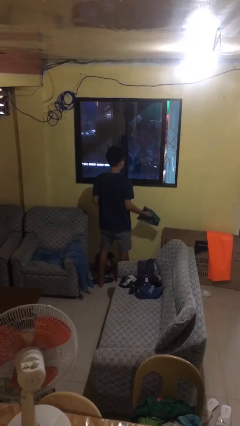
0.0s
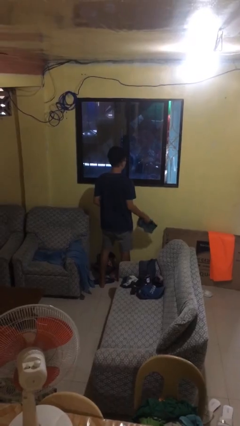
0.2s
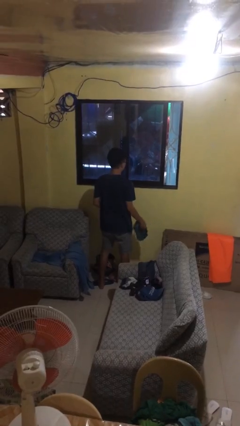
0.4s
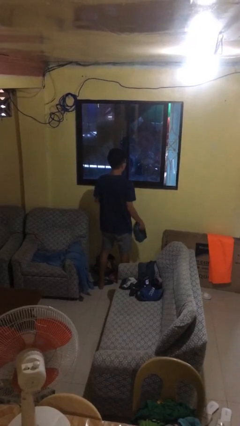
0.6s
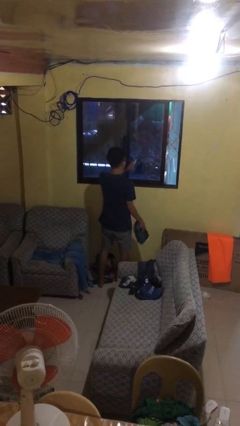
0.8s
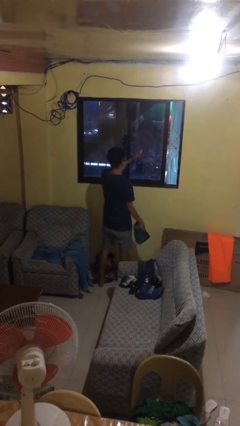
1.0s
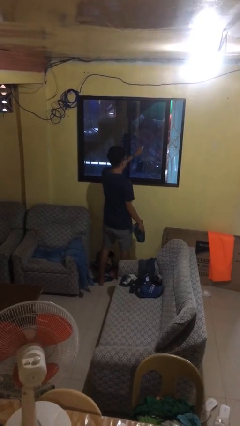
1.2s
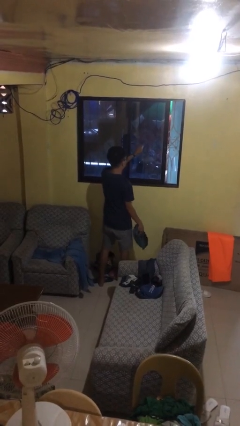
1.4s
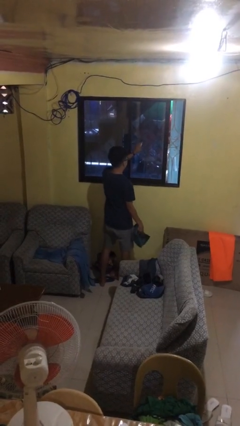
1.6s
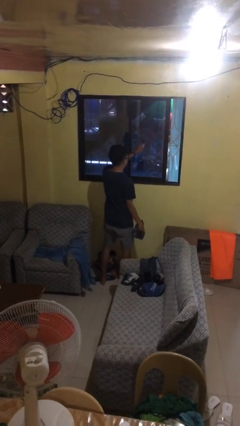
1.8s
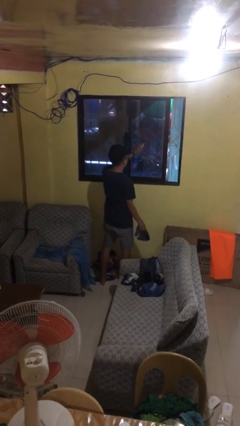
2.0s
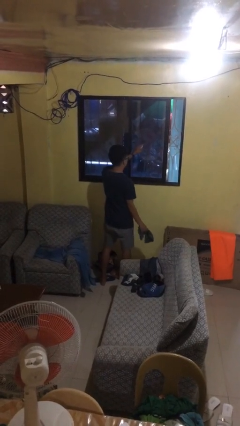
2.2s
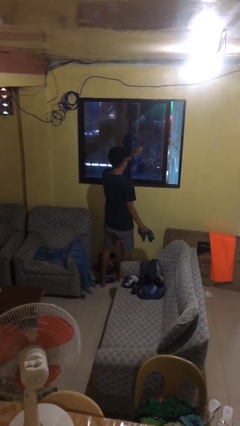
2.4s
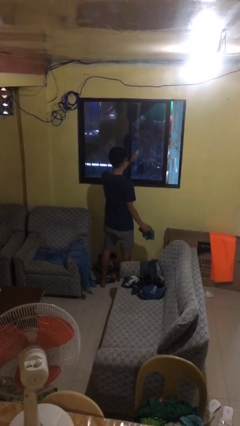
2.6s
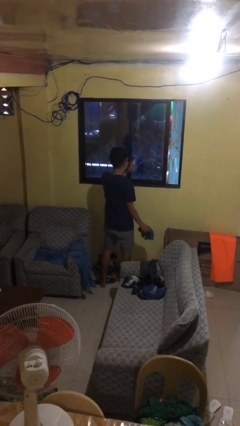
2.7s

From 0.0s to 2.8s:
person sprays from bottle

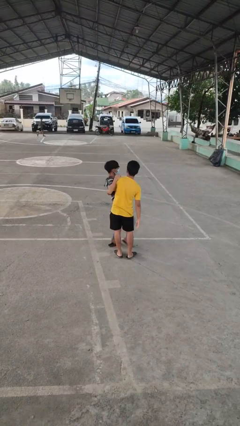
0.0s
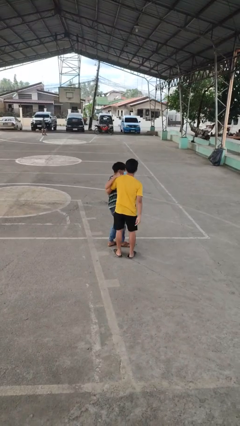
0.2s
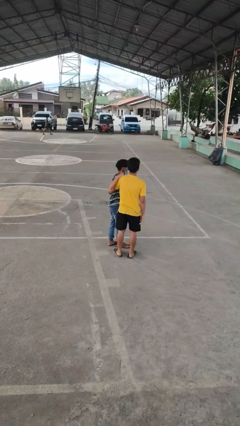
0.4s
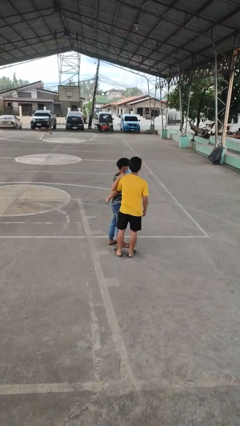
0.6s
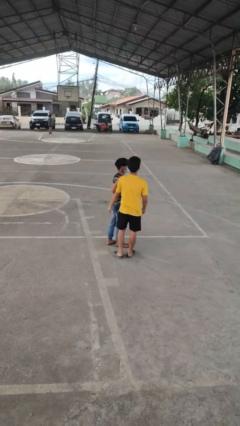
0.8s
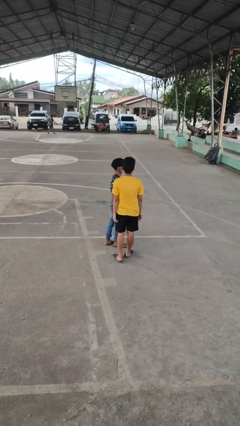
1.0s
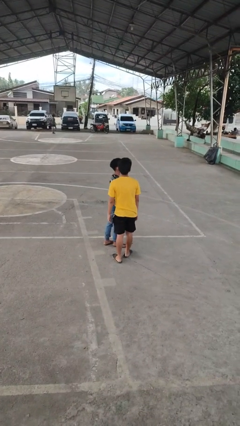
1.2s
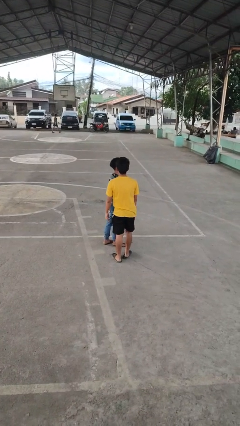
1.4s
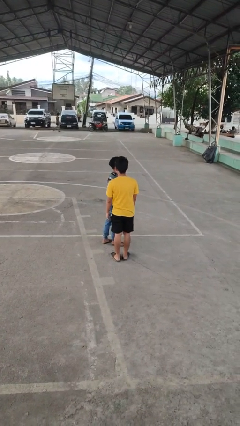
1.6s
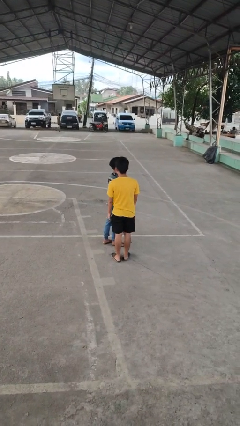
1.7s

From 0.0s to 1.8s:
person puts down person

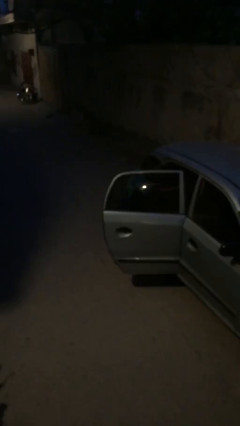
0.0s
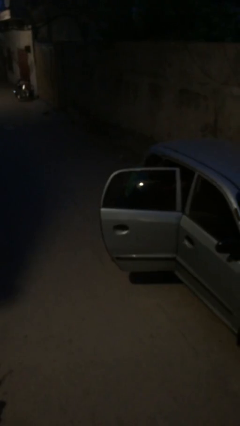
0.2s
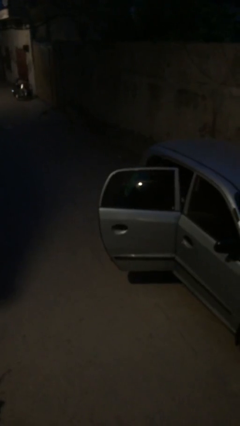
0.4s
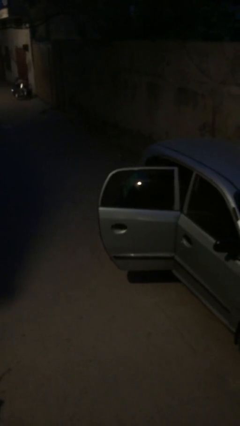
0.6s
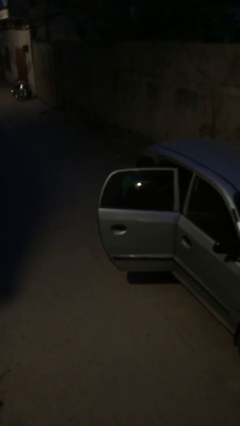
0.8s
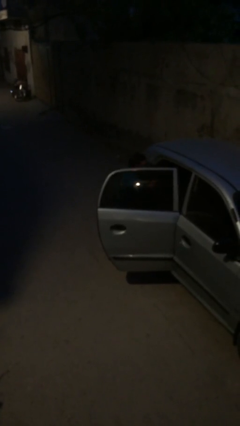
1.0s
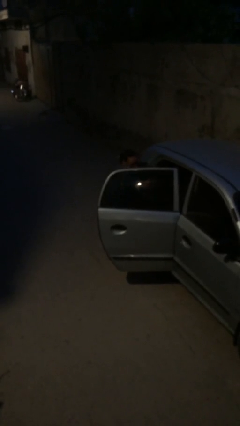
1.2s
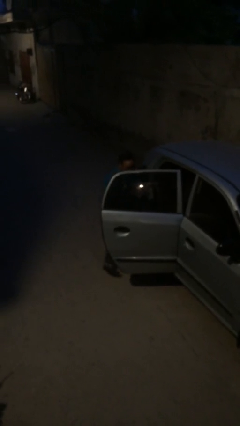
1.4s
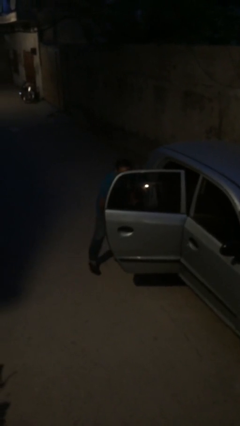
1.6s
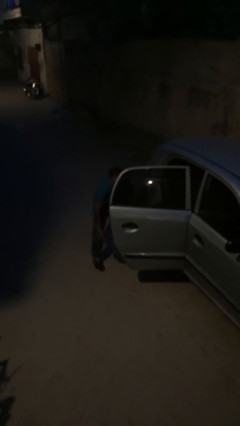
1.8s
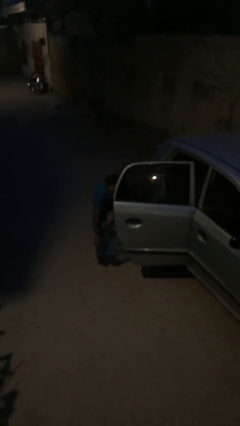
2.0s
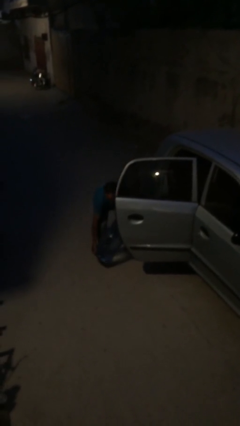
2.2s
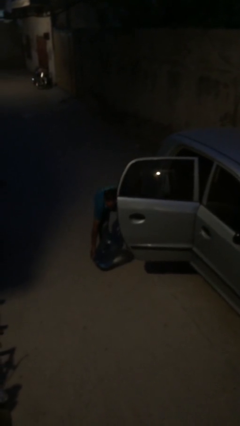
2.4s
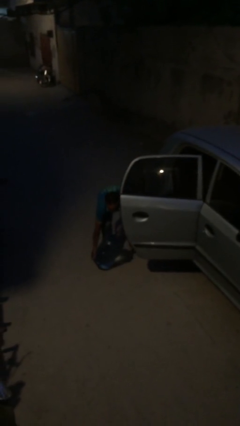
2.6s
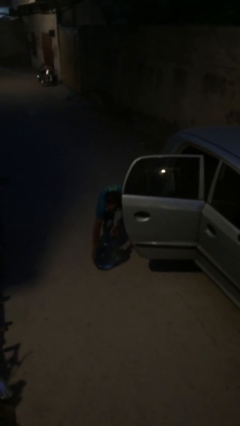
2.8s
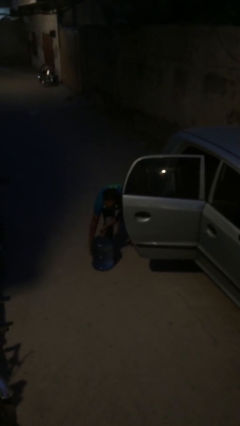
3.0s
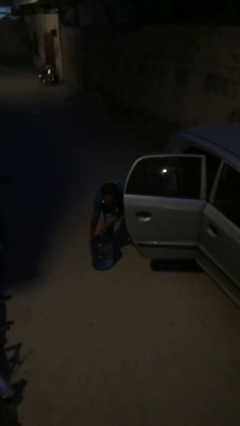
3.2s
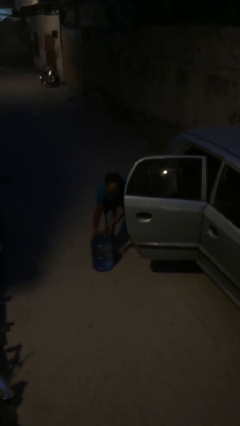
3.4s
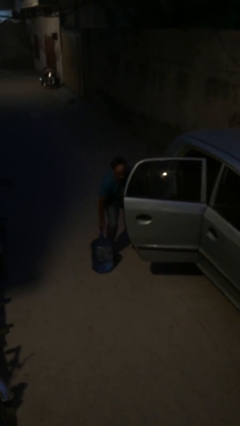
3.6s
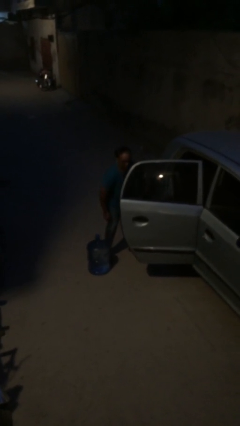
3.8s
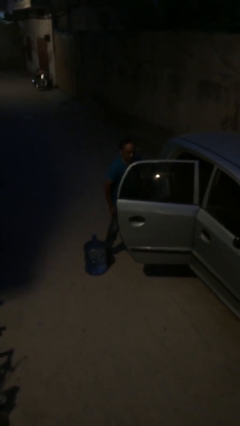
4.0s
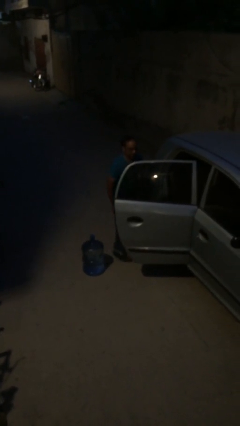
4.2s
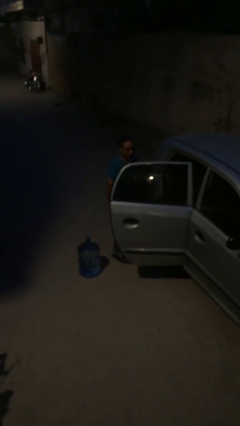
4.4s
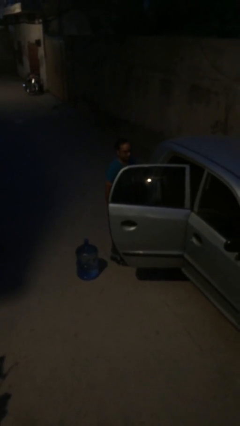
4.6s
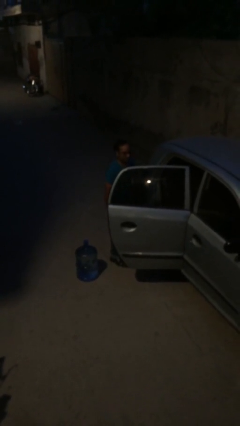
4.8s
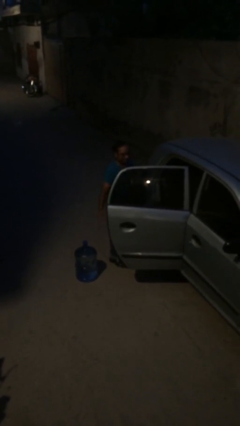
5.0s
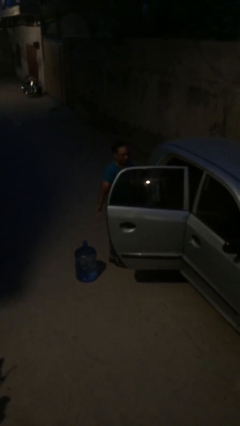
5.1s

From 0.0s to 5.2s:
person unloads car

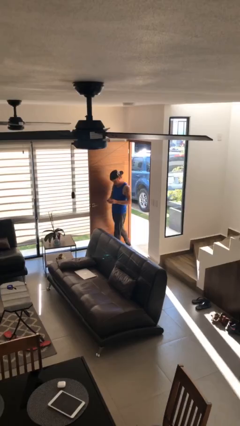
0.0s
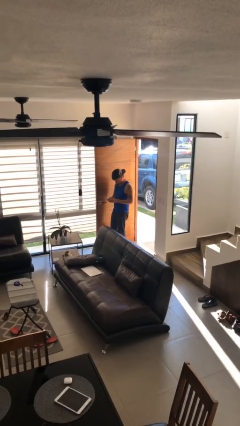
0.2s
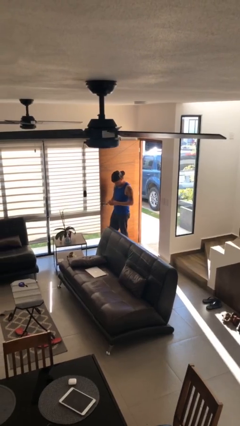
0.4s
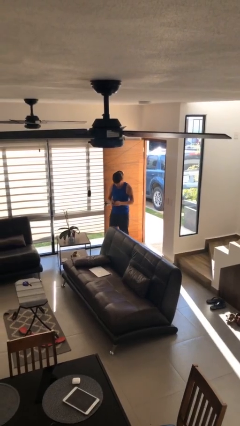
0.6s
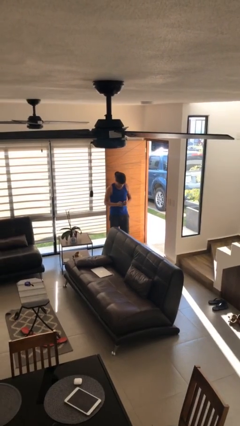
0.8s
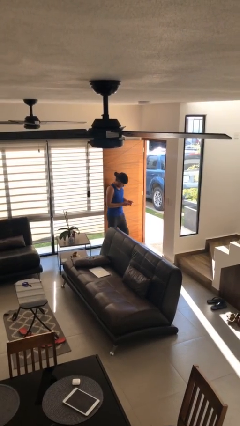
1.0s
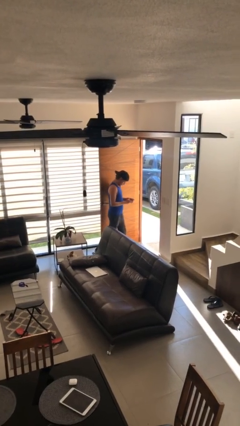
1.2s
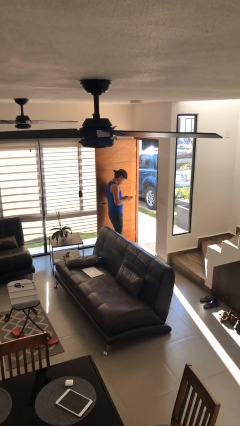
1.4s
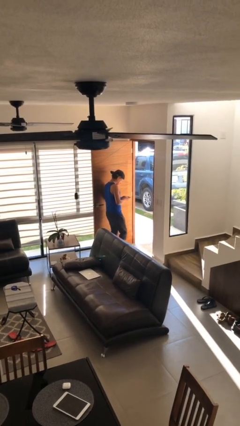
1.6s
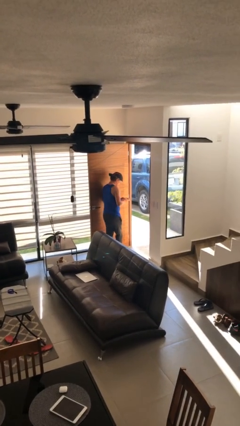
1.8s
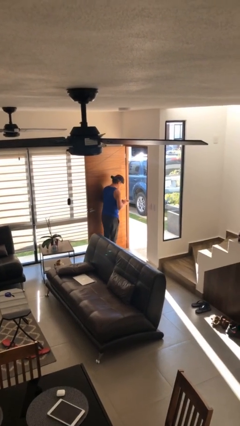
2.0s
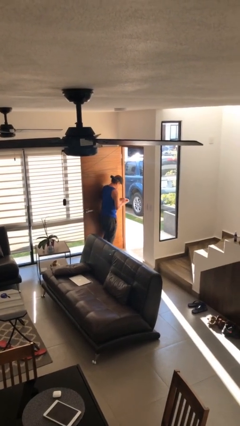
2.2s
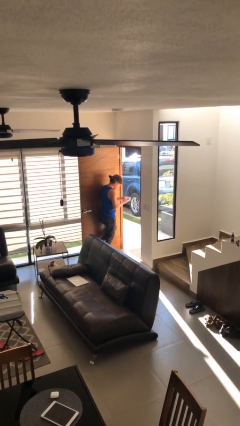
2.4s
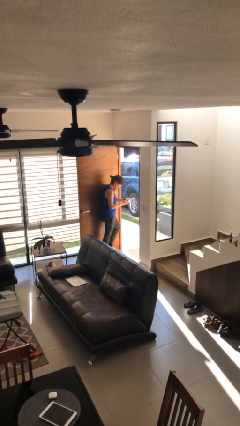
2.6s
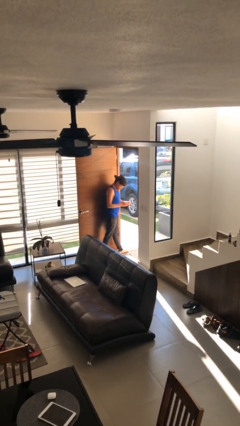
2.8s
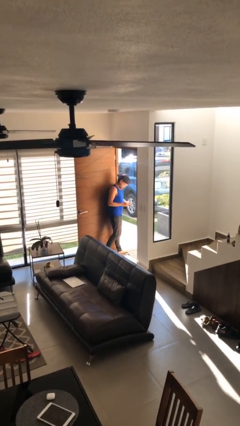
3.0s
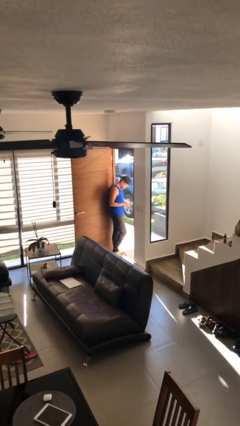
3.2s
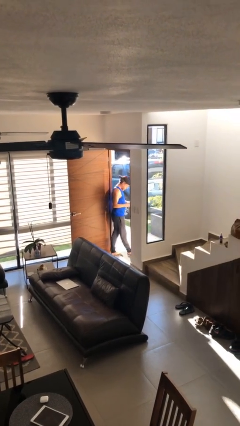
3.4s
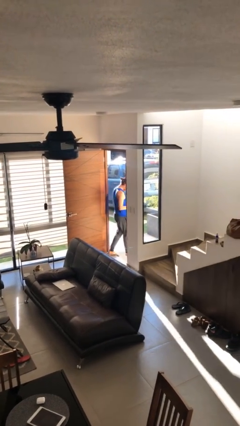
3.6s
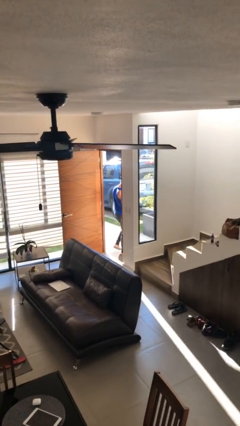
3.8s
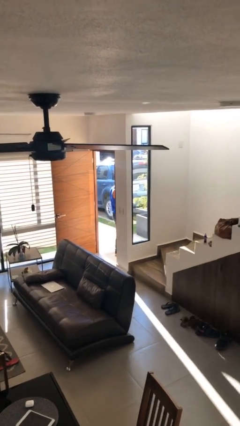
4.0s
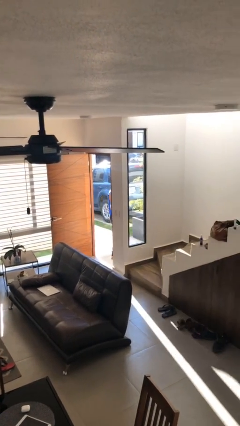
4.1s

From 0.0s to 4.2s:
person exits scene through structure

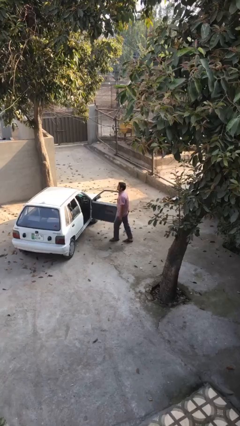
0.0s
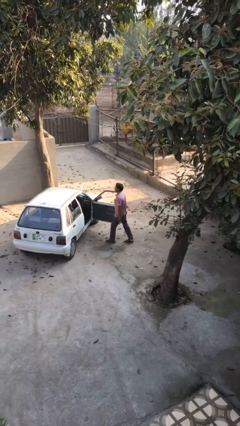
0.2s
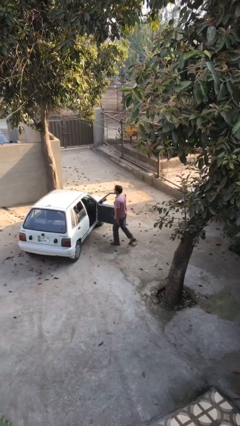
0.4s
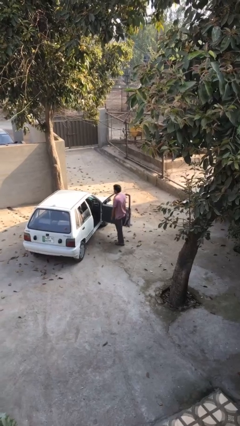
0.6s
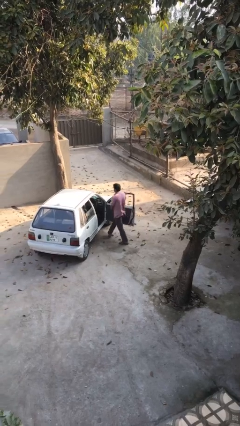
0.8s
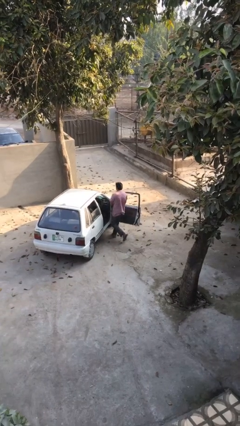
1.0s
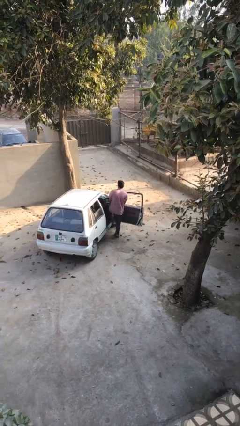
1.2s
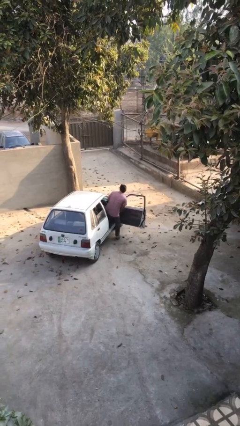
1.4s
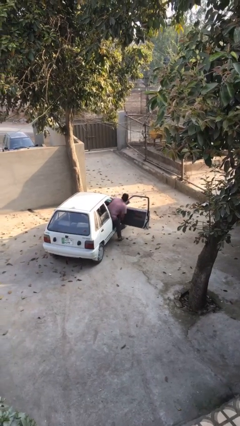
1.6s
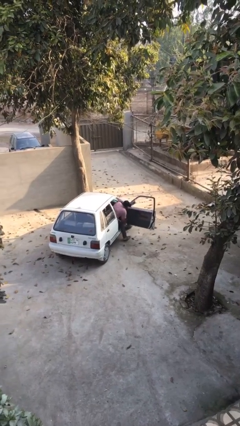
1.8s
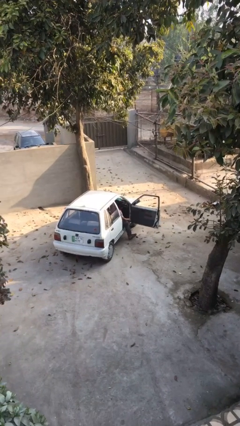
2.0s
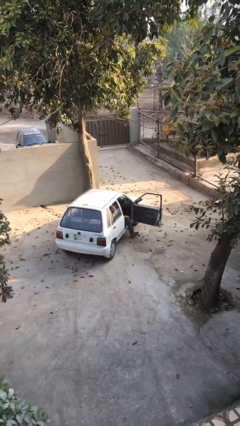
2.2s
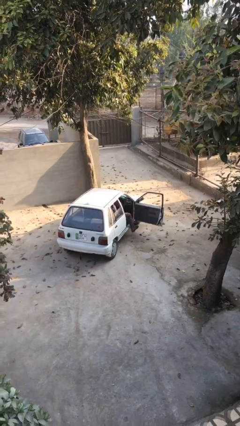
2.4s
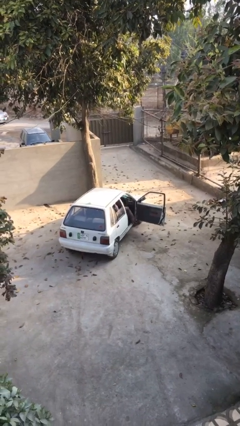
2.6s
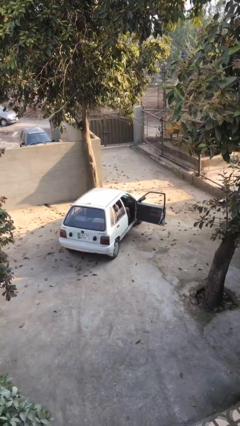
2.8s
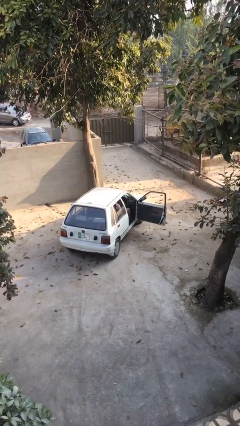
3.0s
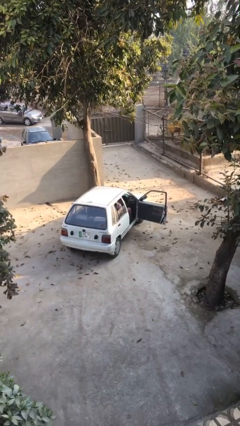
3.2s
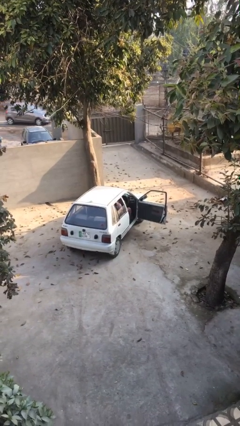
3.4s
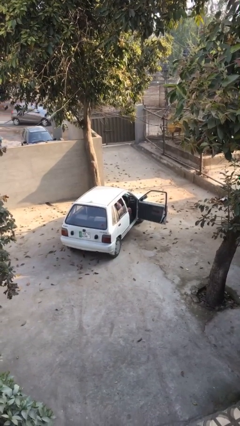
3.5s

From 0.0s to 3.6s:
person enters car
